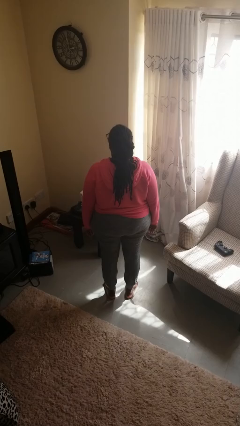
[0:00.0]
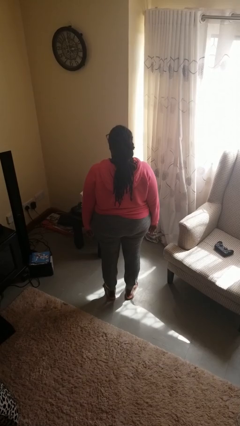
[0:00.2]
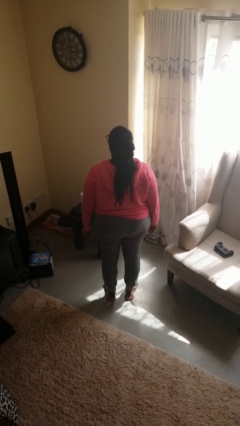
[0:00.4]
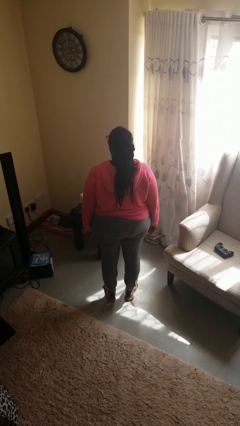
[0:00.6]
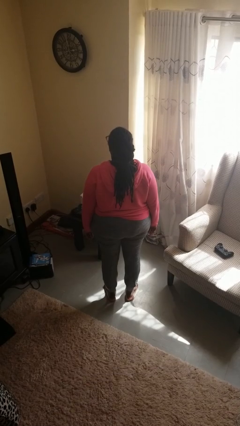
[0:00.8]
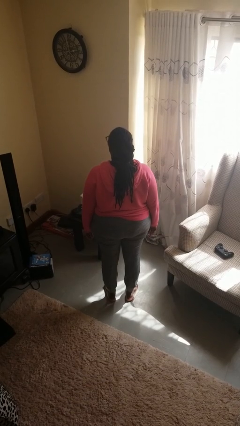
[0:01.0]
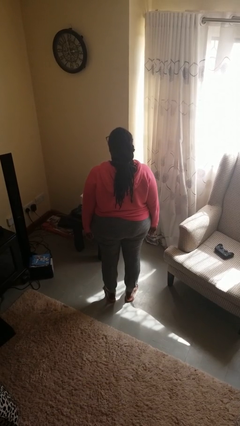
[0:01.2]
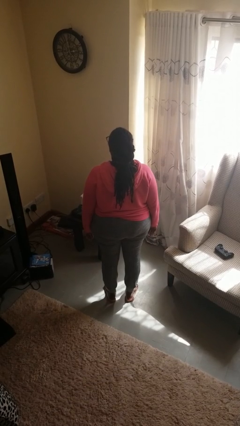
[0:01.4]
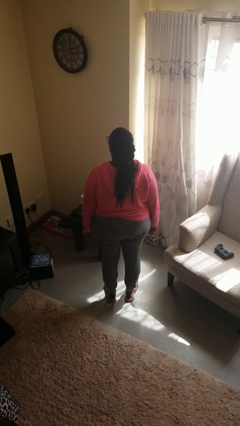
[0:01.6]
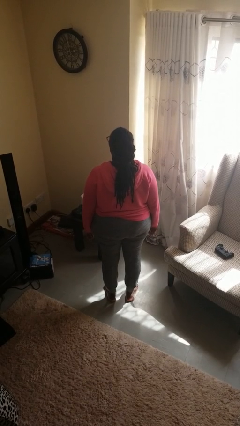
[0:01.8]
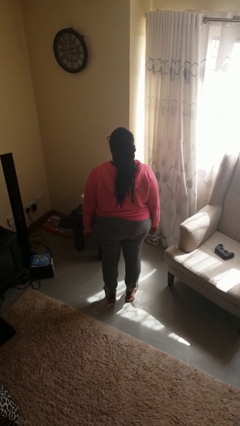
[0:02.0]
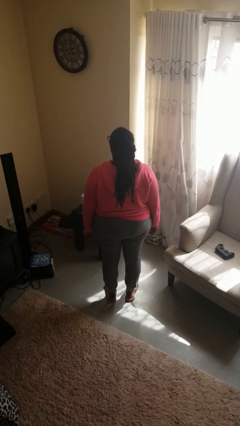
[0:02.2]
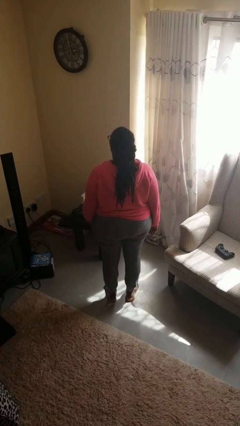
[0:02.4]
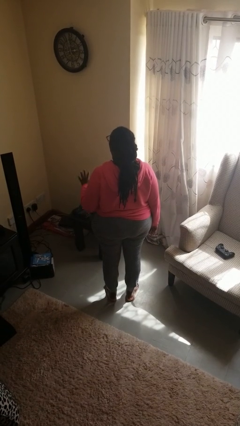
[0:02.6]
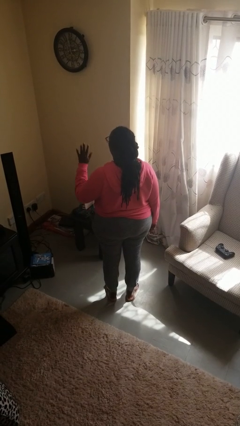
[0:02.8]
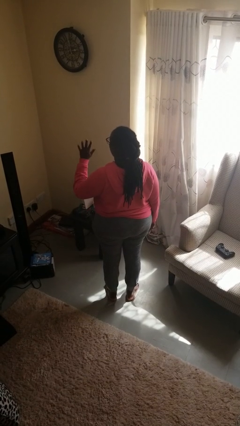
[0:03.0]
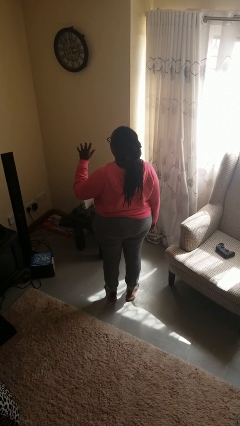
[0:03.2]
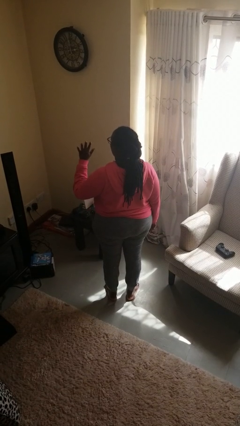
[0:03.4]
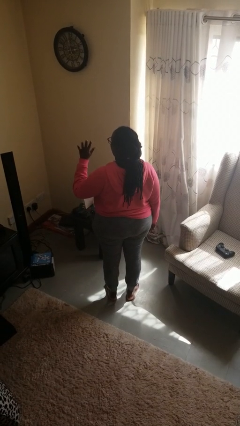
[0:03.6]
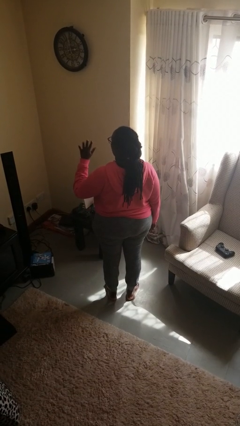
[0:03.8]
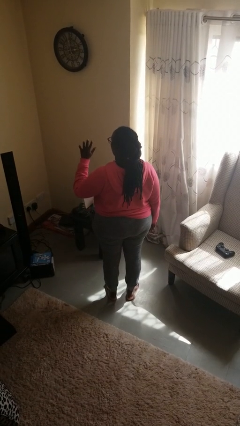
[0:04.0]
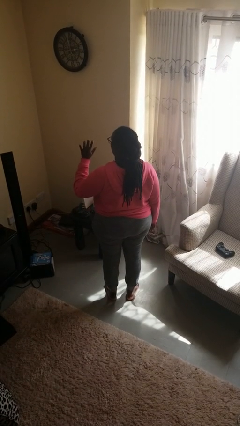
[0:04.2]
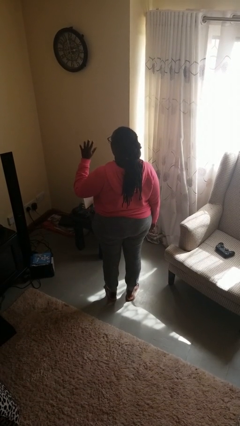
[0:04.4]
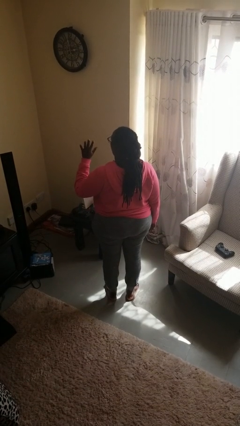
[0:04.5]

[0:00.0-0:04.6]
person gestures number five

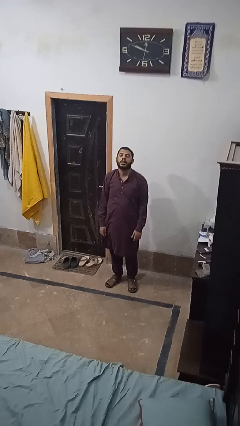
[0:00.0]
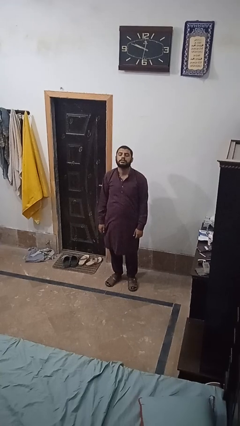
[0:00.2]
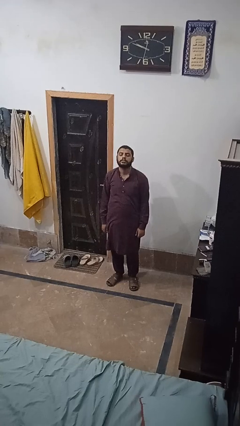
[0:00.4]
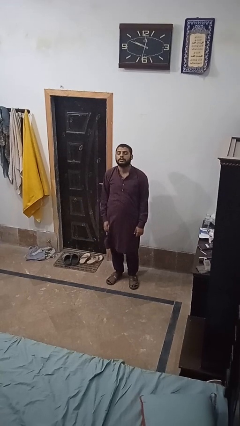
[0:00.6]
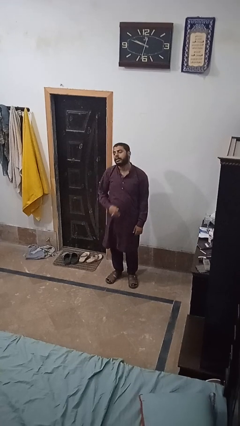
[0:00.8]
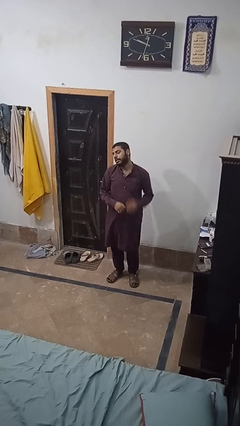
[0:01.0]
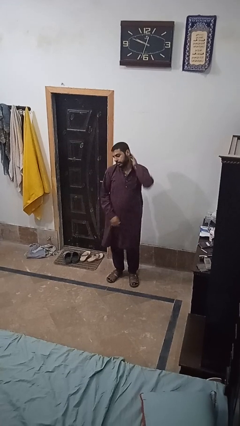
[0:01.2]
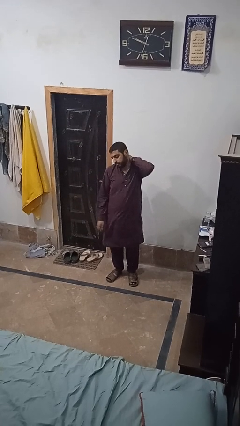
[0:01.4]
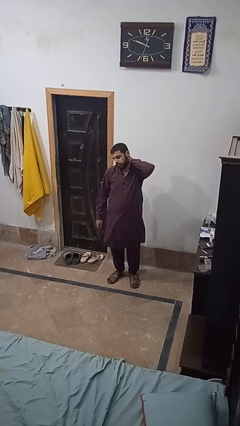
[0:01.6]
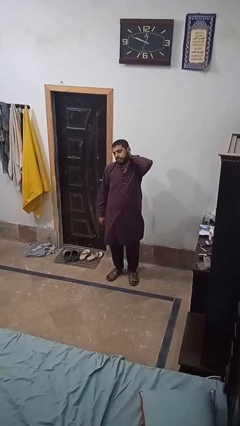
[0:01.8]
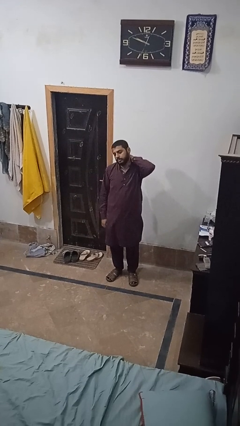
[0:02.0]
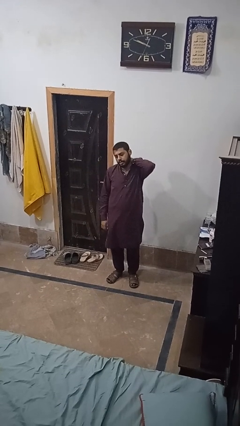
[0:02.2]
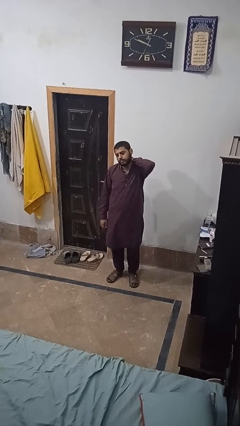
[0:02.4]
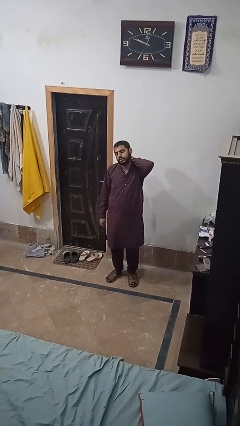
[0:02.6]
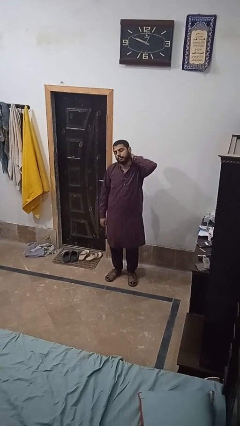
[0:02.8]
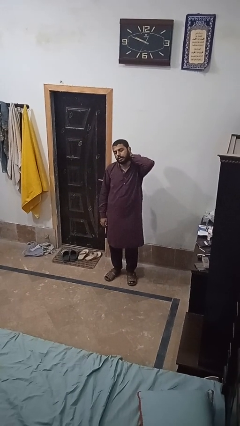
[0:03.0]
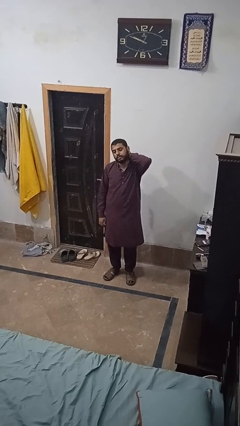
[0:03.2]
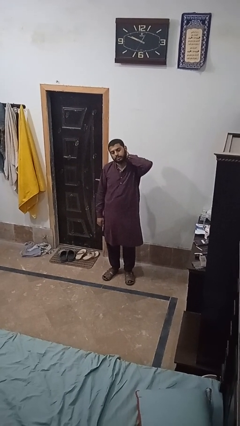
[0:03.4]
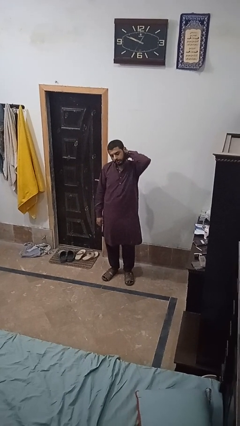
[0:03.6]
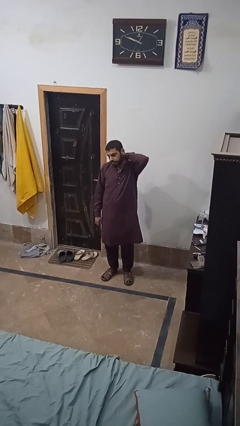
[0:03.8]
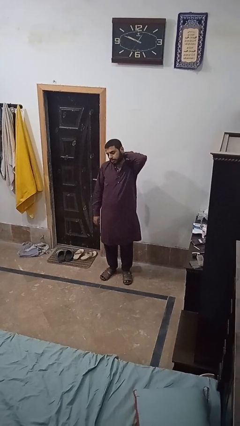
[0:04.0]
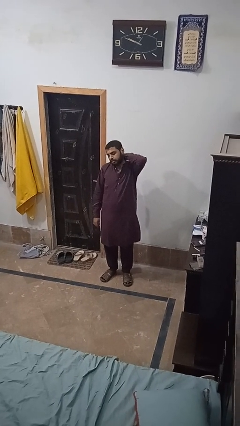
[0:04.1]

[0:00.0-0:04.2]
person rubs neck

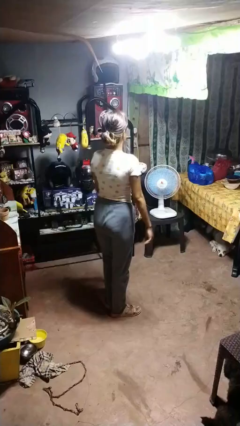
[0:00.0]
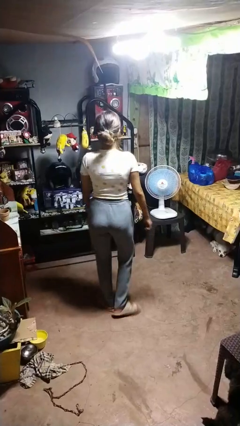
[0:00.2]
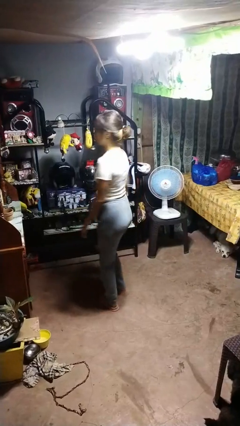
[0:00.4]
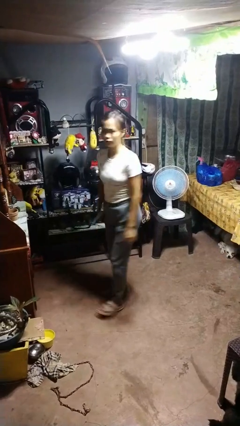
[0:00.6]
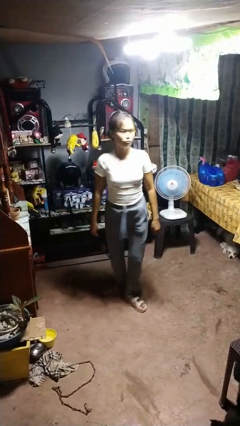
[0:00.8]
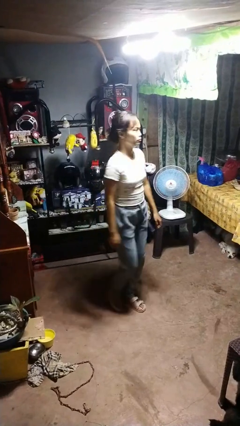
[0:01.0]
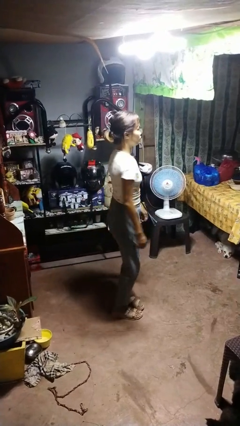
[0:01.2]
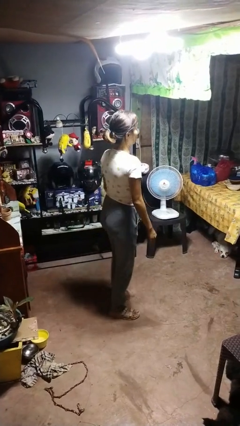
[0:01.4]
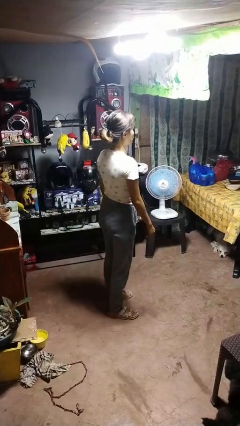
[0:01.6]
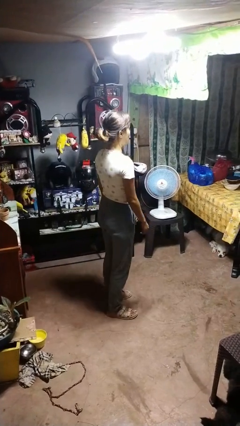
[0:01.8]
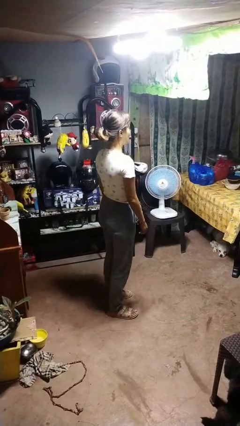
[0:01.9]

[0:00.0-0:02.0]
person twirls

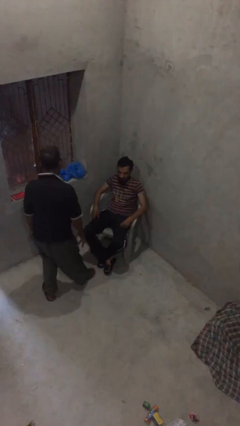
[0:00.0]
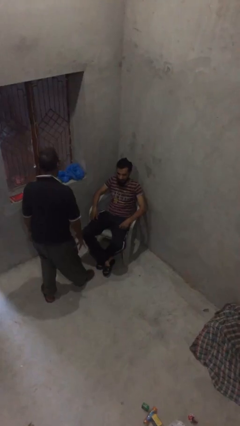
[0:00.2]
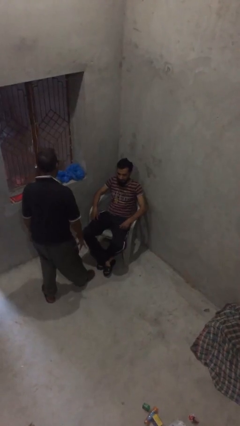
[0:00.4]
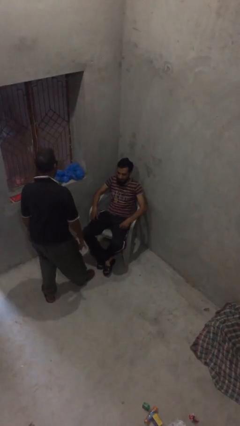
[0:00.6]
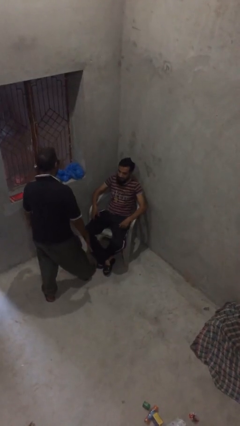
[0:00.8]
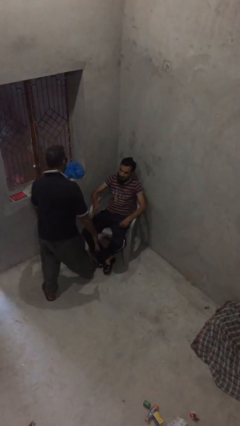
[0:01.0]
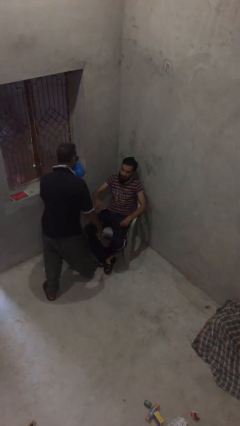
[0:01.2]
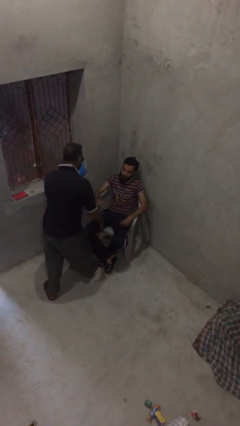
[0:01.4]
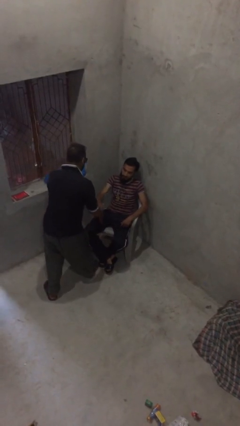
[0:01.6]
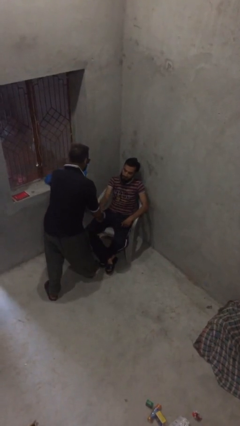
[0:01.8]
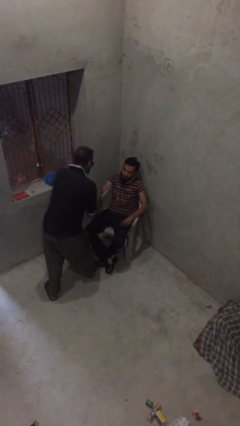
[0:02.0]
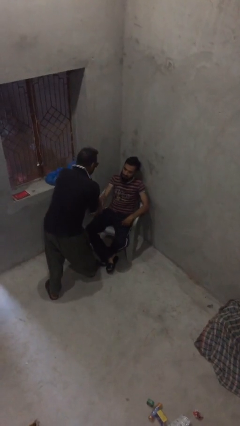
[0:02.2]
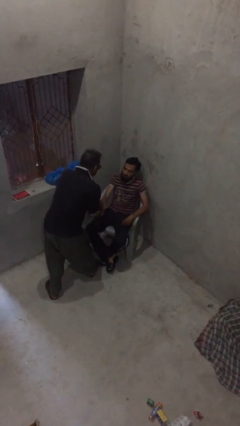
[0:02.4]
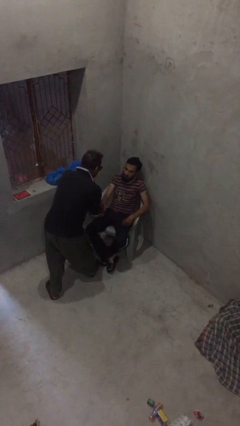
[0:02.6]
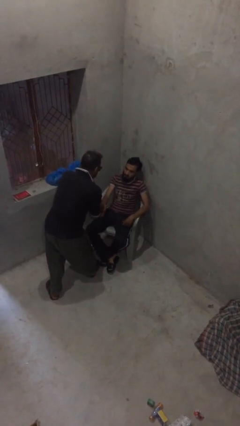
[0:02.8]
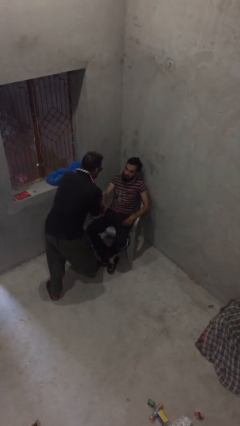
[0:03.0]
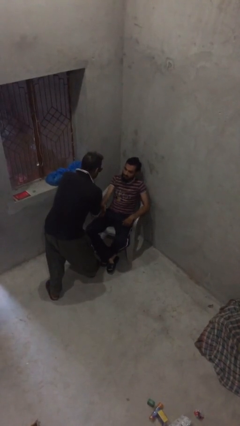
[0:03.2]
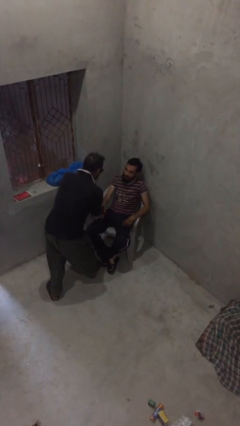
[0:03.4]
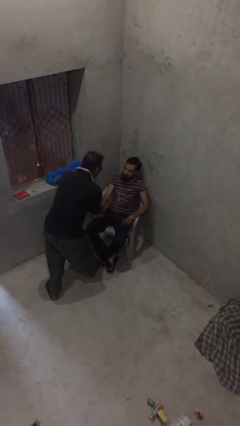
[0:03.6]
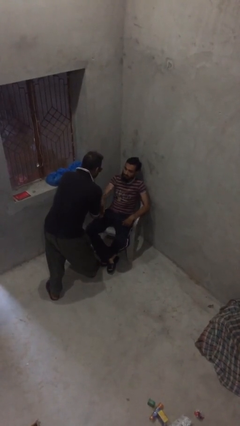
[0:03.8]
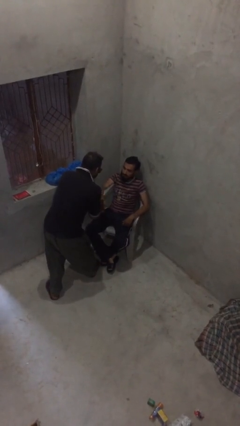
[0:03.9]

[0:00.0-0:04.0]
person shakes hand

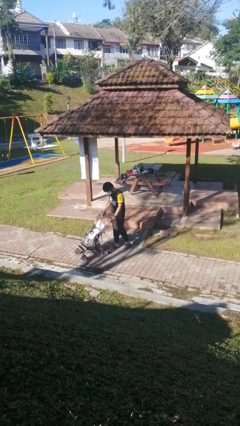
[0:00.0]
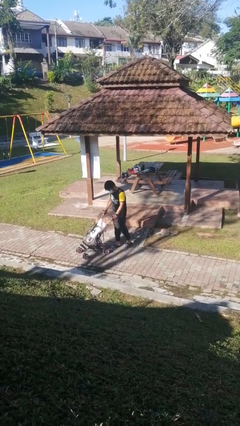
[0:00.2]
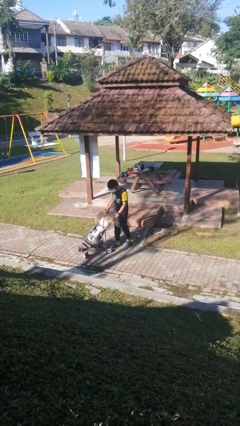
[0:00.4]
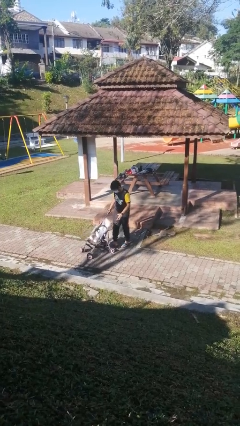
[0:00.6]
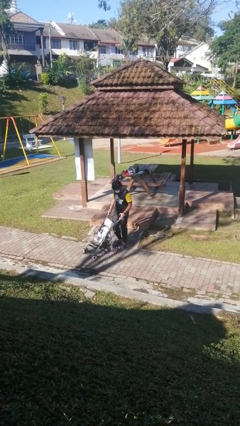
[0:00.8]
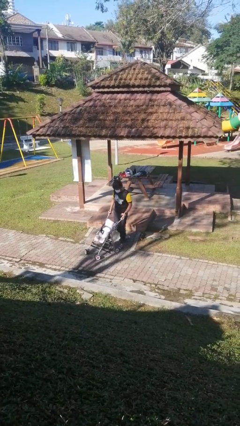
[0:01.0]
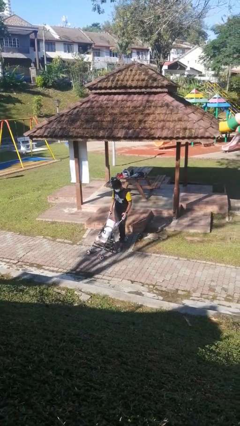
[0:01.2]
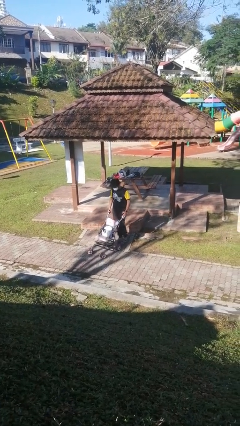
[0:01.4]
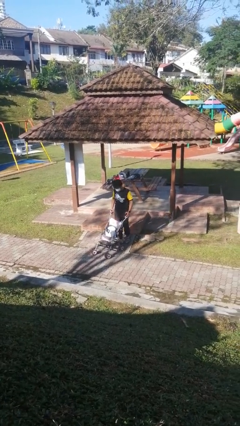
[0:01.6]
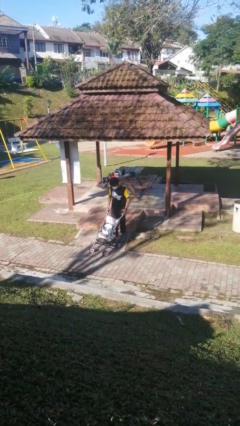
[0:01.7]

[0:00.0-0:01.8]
person pulls wheeled cart

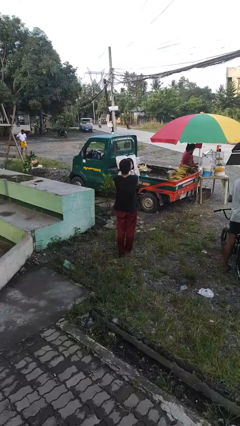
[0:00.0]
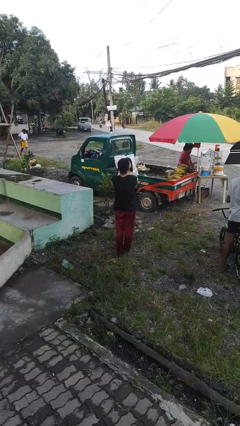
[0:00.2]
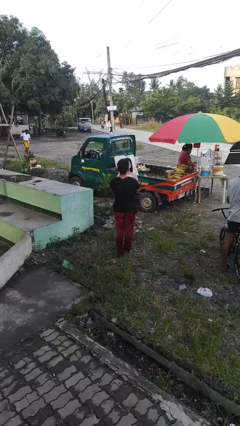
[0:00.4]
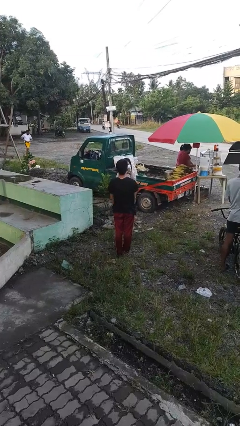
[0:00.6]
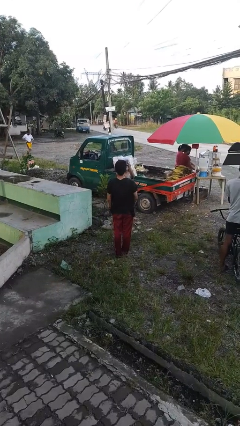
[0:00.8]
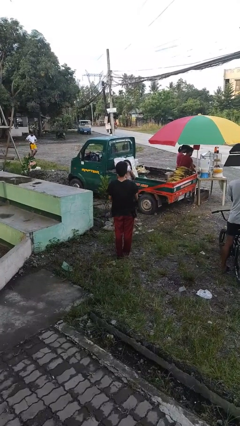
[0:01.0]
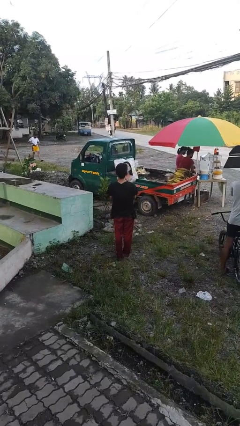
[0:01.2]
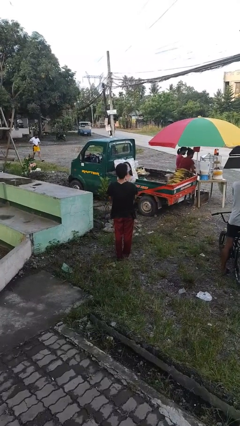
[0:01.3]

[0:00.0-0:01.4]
person transfers object to person
